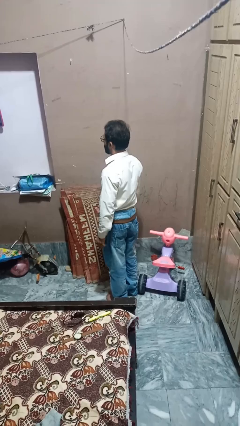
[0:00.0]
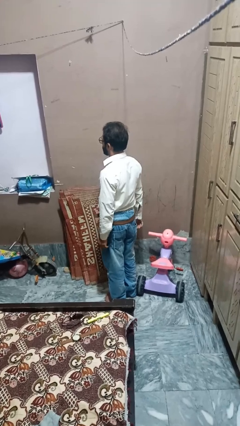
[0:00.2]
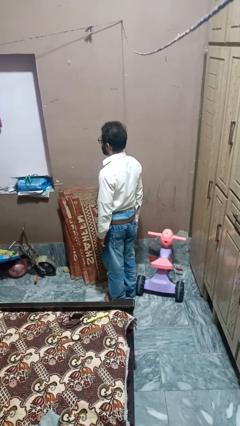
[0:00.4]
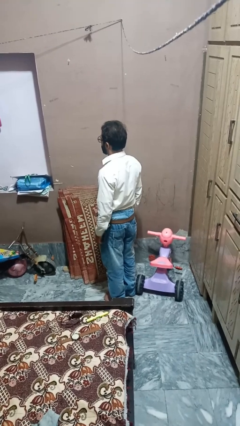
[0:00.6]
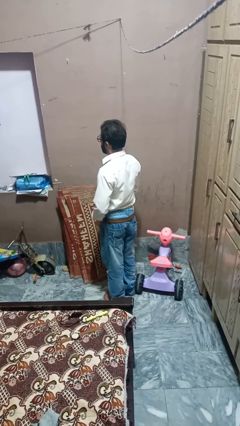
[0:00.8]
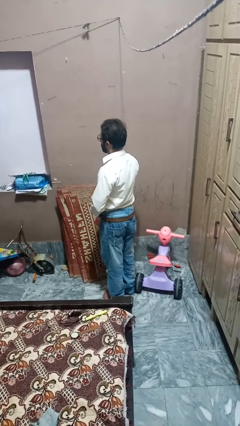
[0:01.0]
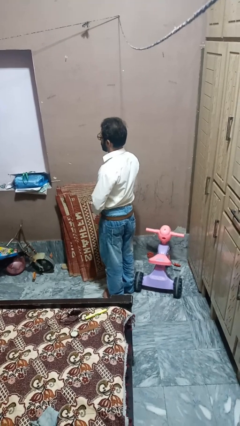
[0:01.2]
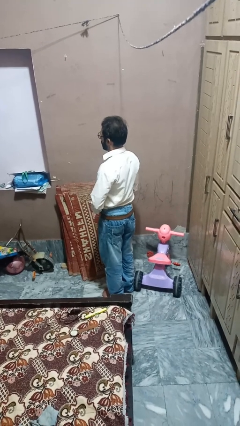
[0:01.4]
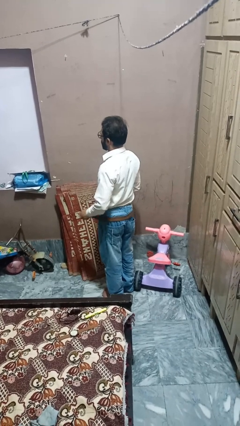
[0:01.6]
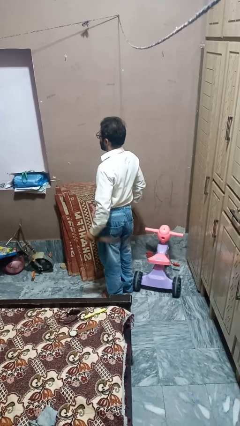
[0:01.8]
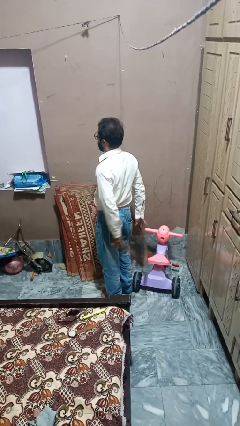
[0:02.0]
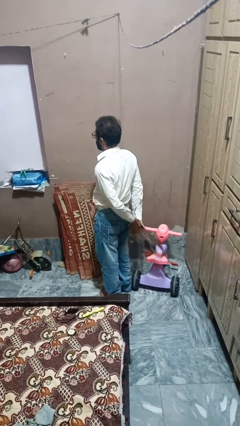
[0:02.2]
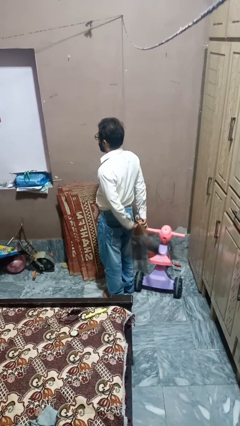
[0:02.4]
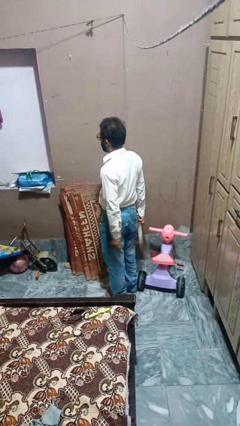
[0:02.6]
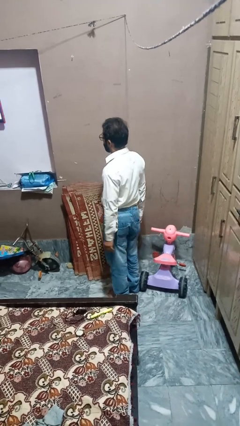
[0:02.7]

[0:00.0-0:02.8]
person takes off belt

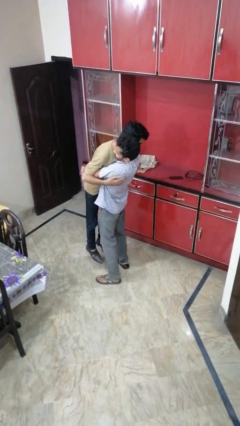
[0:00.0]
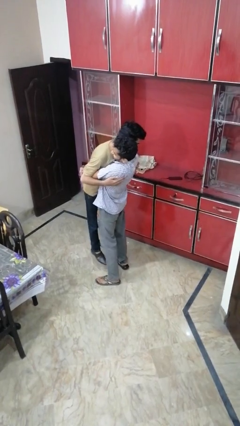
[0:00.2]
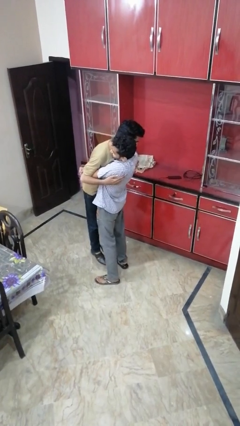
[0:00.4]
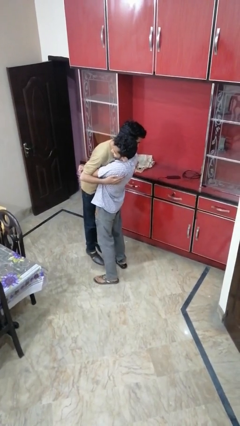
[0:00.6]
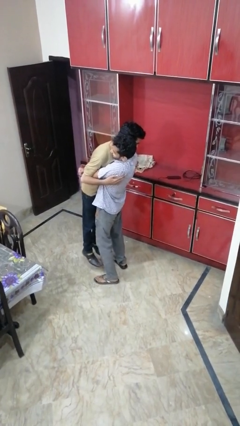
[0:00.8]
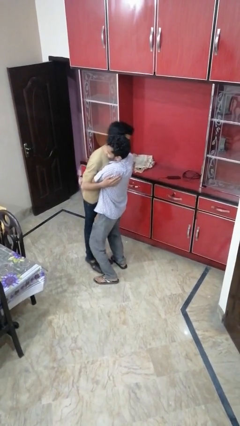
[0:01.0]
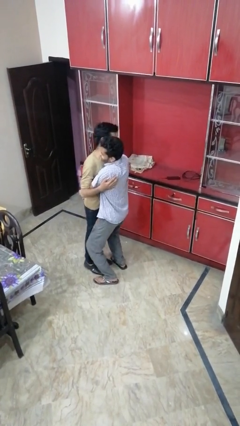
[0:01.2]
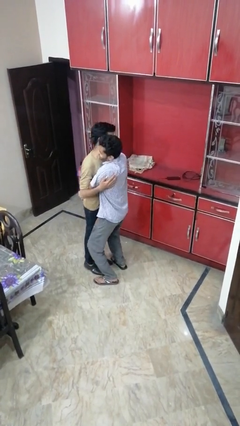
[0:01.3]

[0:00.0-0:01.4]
person laughs with person

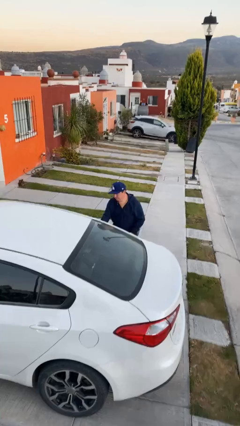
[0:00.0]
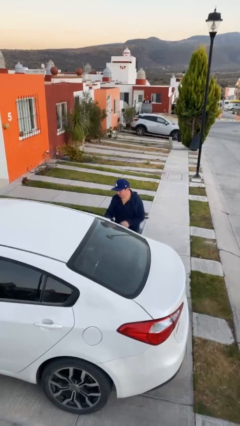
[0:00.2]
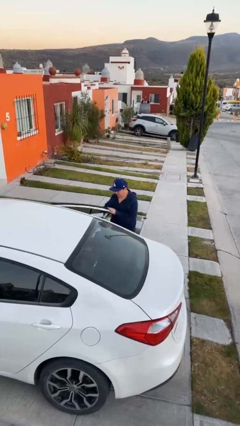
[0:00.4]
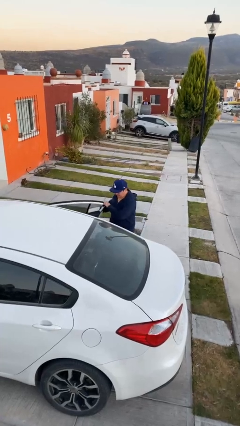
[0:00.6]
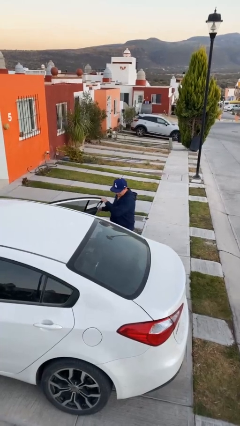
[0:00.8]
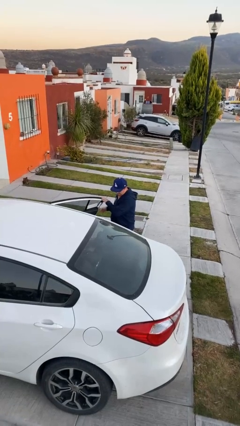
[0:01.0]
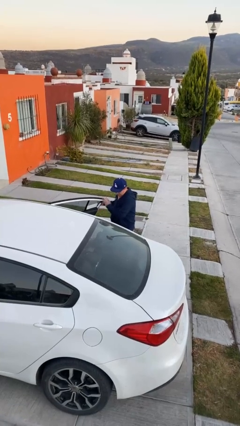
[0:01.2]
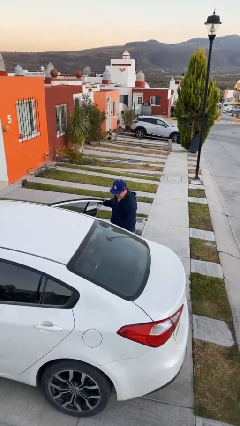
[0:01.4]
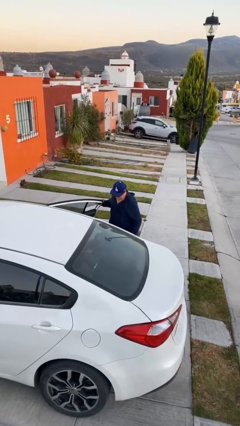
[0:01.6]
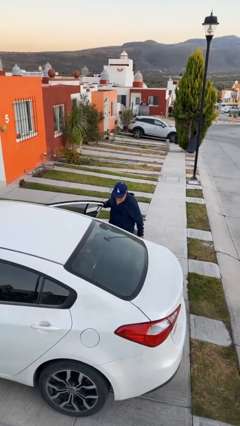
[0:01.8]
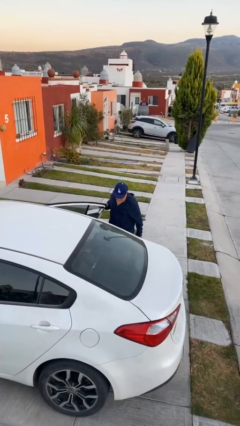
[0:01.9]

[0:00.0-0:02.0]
person opens car door

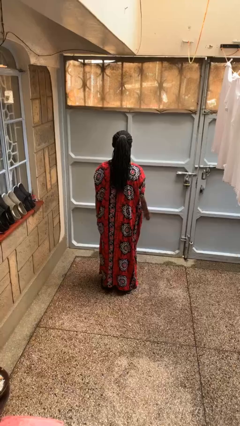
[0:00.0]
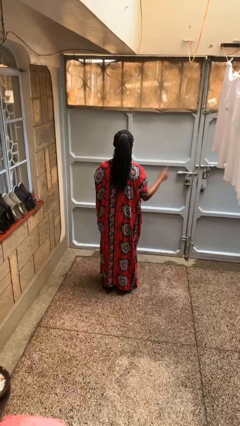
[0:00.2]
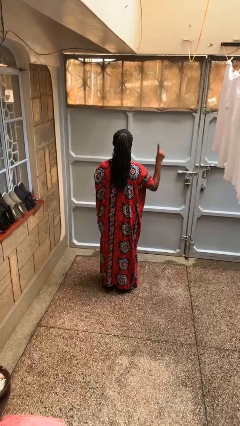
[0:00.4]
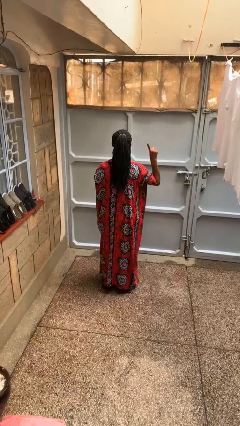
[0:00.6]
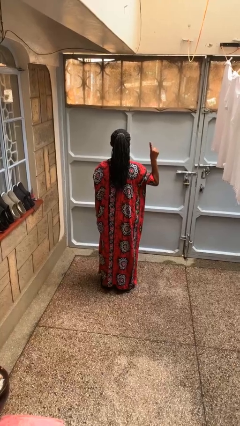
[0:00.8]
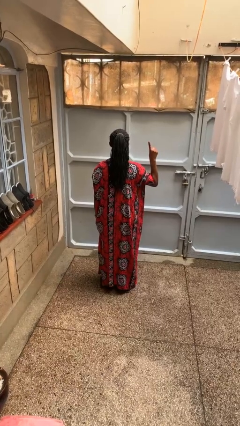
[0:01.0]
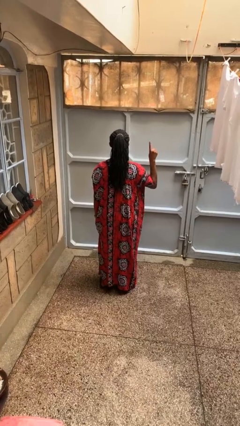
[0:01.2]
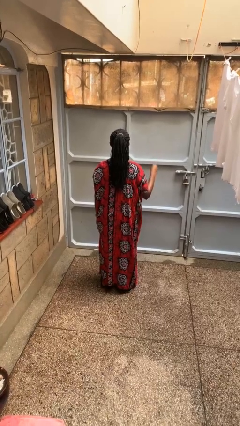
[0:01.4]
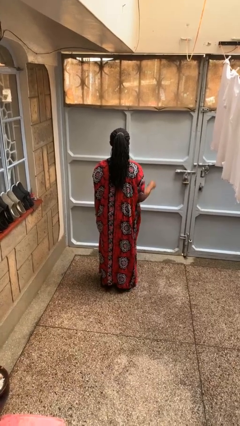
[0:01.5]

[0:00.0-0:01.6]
person gestures number one

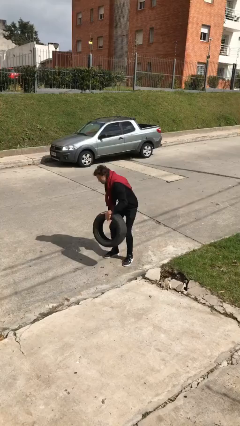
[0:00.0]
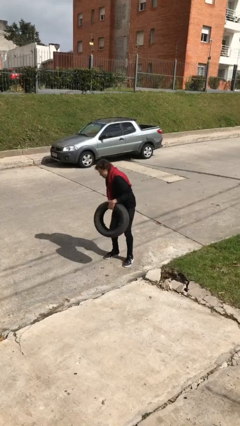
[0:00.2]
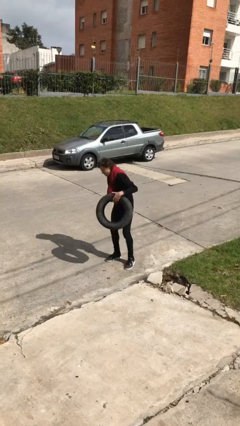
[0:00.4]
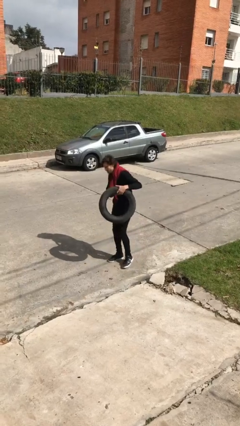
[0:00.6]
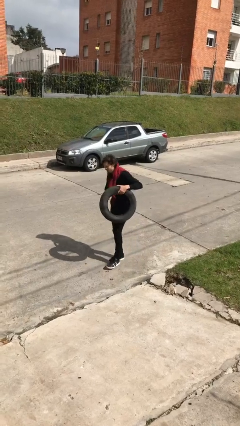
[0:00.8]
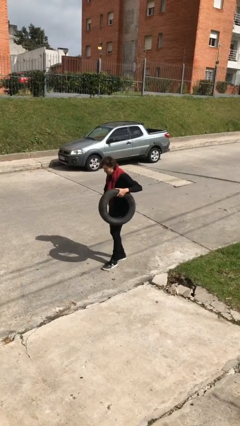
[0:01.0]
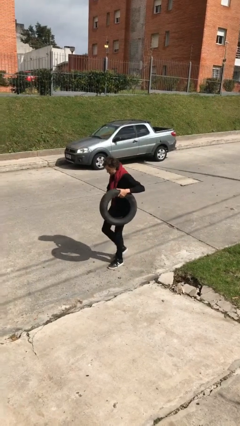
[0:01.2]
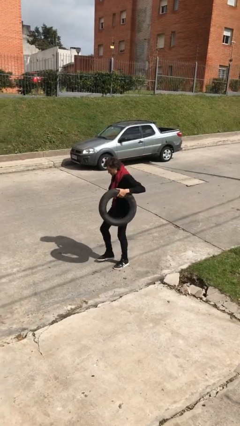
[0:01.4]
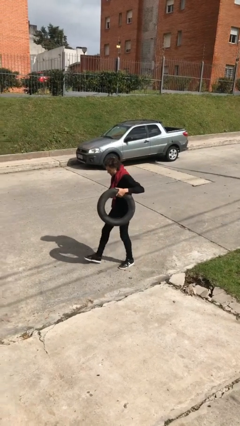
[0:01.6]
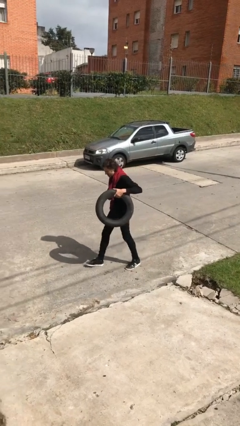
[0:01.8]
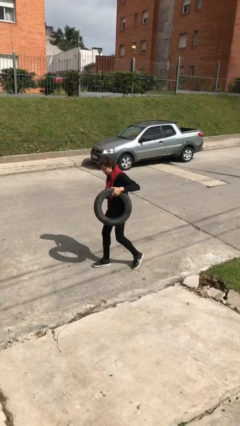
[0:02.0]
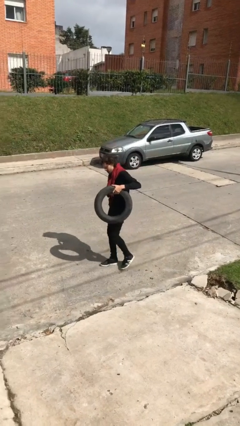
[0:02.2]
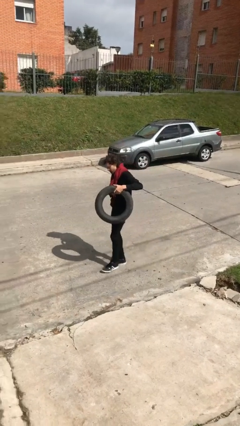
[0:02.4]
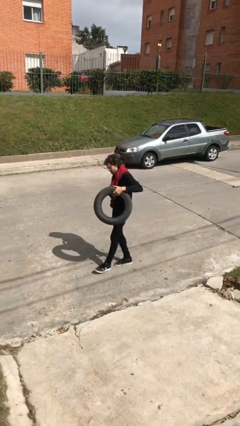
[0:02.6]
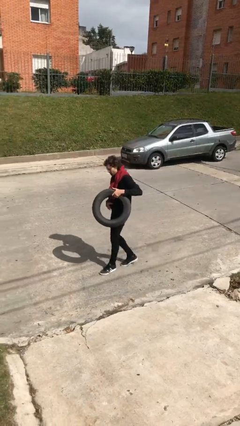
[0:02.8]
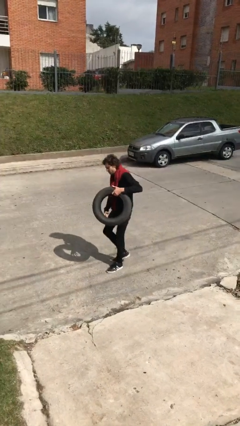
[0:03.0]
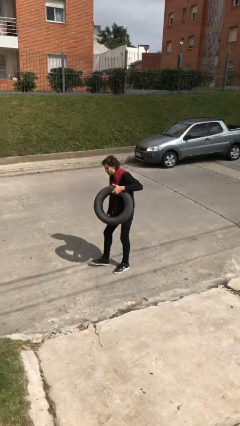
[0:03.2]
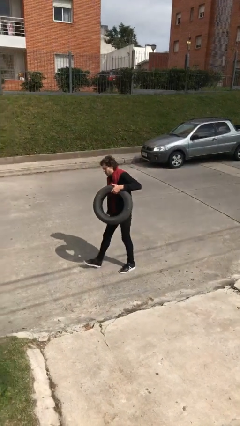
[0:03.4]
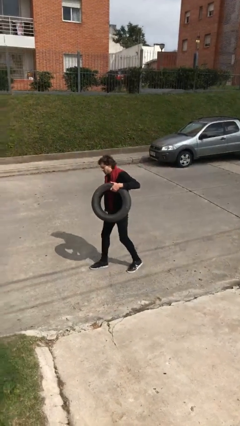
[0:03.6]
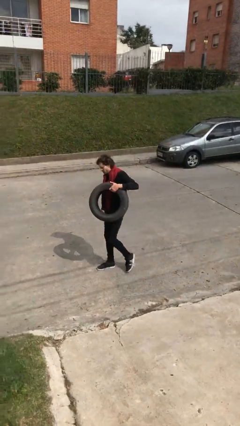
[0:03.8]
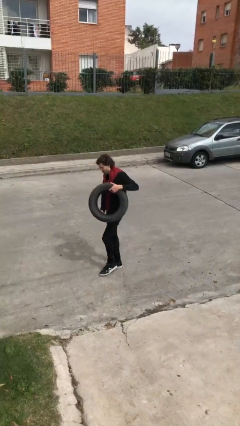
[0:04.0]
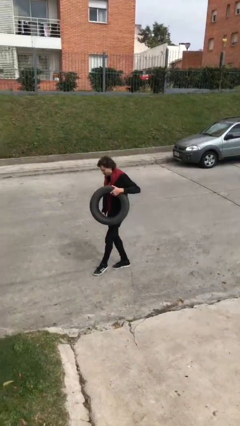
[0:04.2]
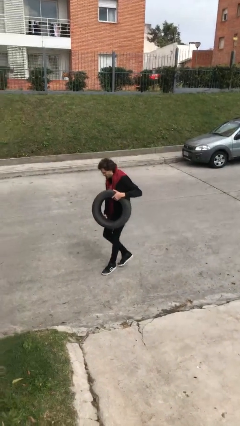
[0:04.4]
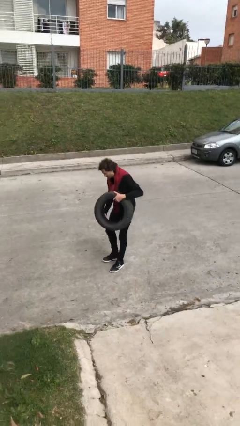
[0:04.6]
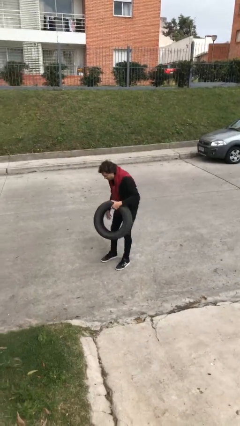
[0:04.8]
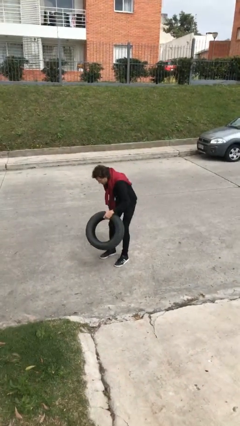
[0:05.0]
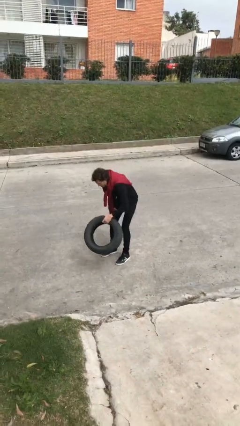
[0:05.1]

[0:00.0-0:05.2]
person carries heavy object

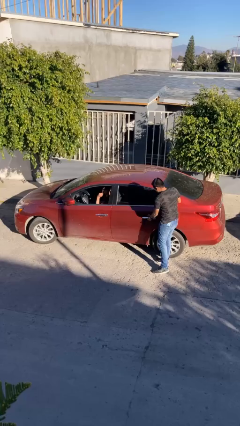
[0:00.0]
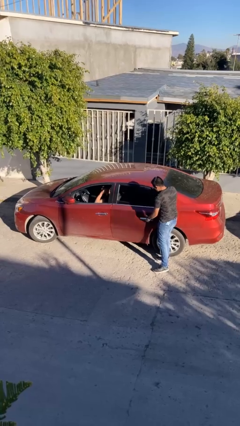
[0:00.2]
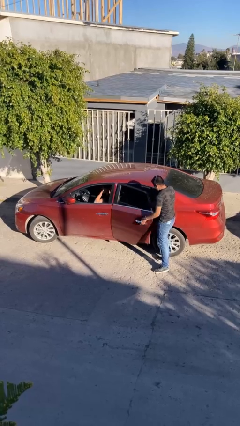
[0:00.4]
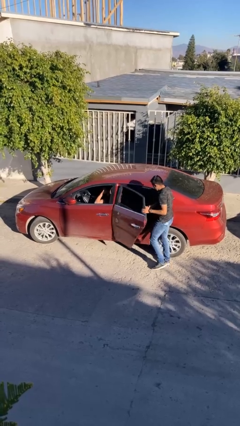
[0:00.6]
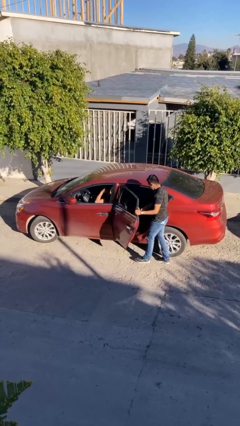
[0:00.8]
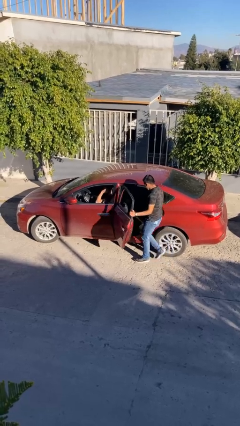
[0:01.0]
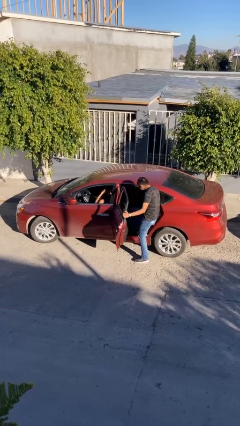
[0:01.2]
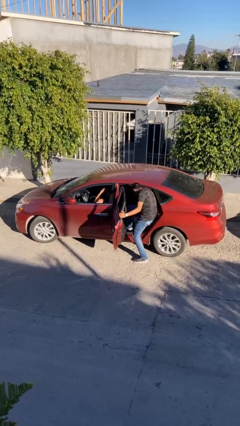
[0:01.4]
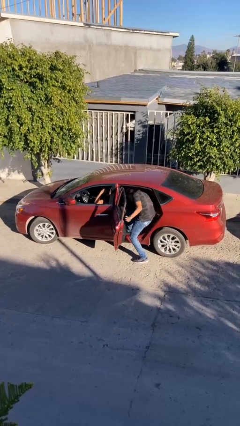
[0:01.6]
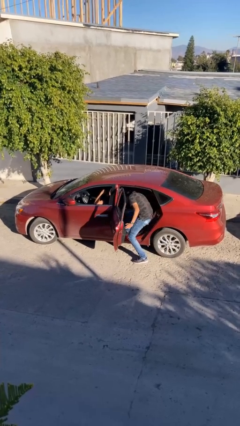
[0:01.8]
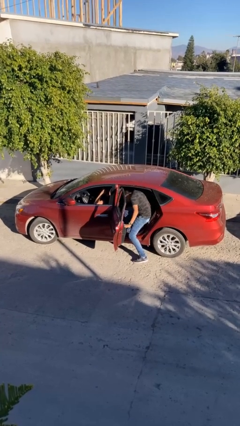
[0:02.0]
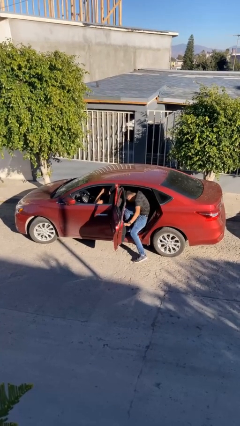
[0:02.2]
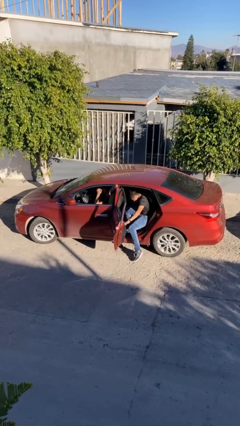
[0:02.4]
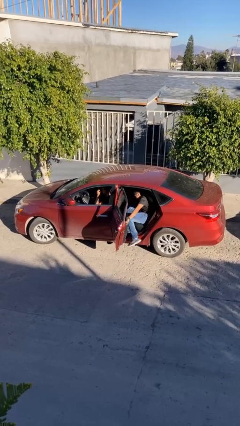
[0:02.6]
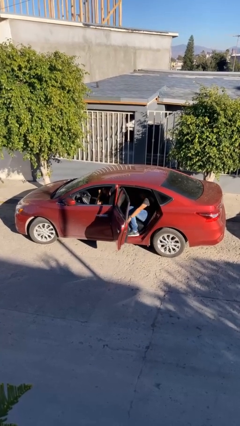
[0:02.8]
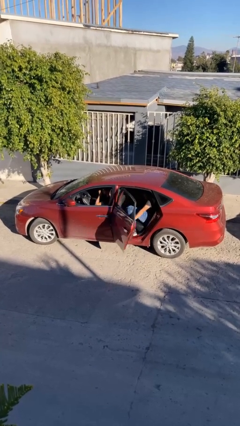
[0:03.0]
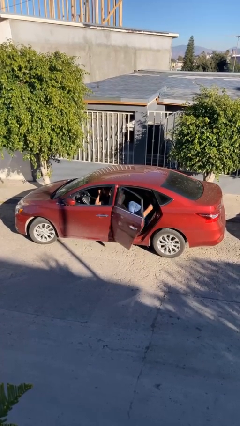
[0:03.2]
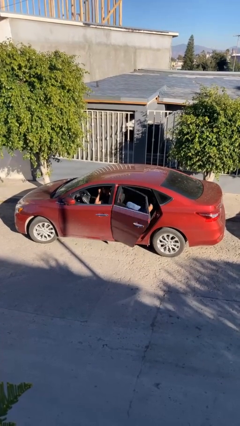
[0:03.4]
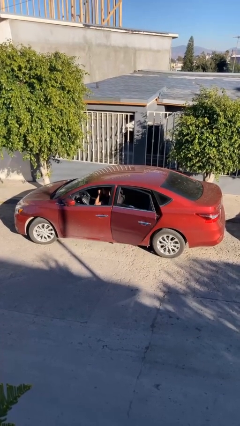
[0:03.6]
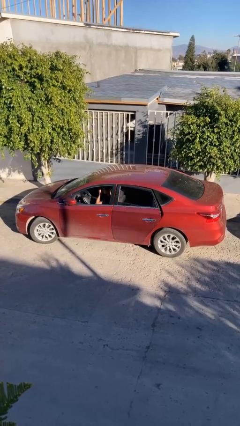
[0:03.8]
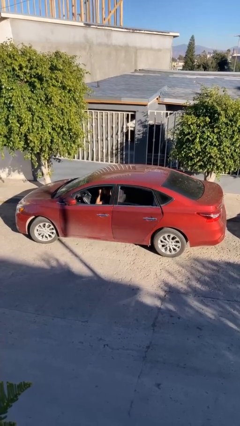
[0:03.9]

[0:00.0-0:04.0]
car picks up person

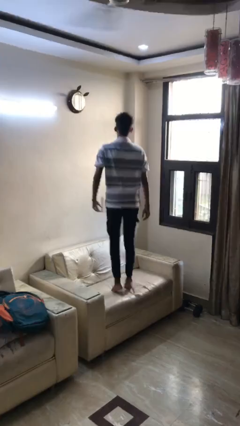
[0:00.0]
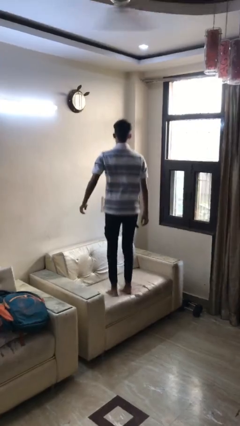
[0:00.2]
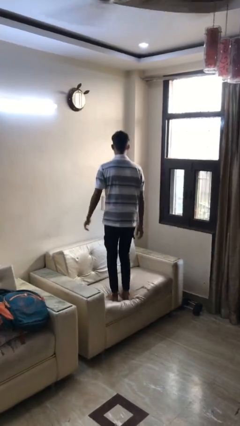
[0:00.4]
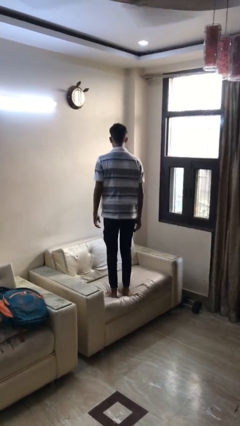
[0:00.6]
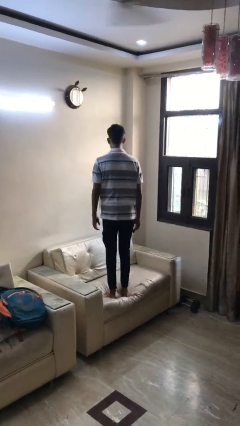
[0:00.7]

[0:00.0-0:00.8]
person jumps on couch
